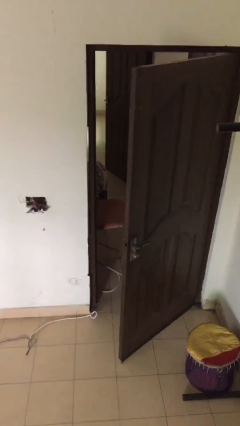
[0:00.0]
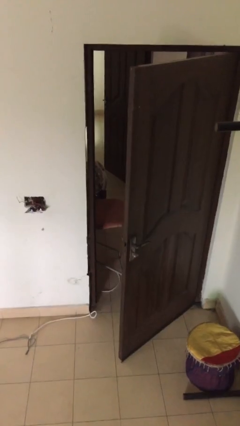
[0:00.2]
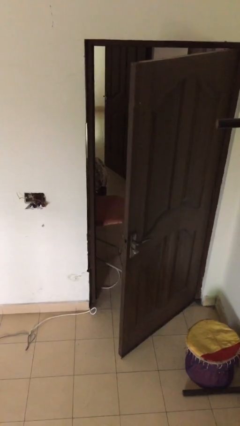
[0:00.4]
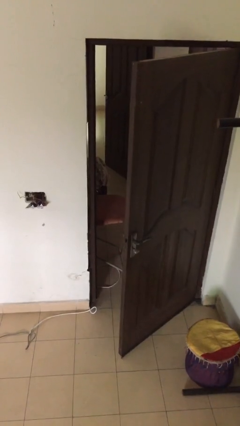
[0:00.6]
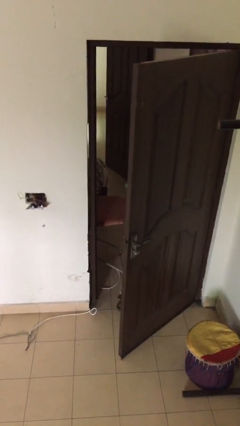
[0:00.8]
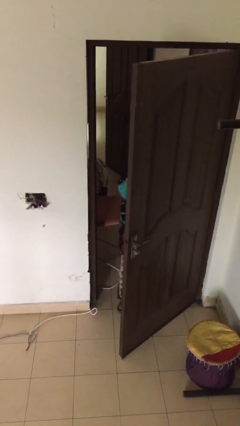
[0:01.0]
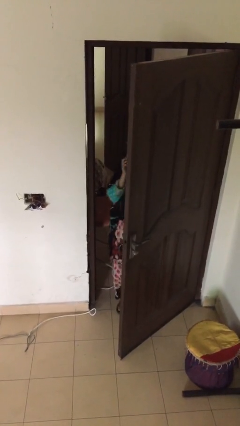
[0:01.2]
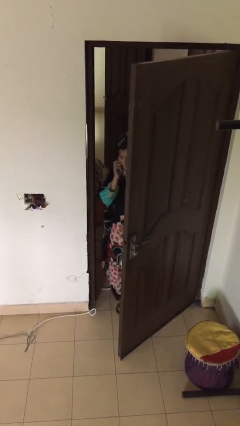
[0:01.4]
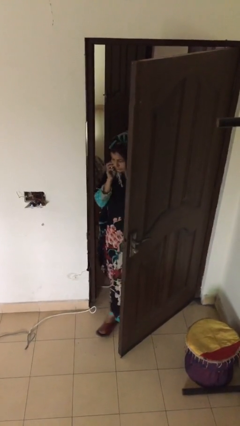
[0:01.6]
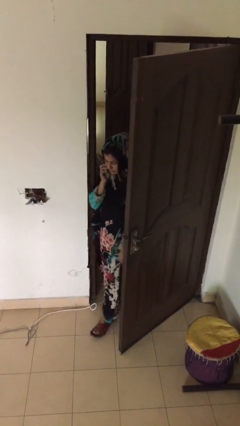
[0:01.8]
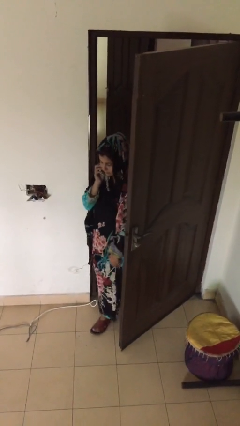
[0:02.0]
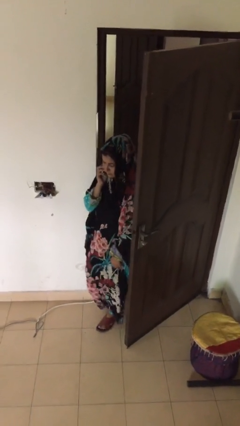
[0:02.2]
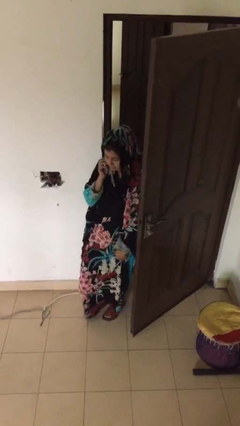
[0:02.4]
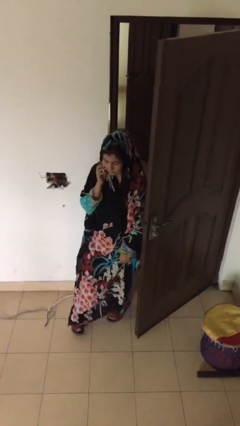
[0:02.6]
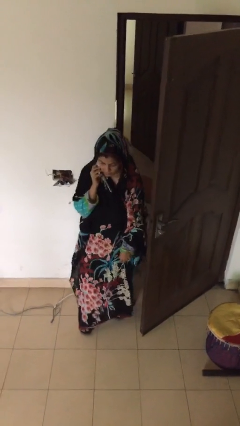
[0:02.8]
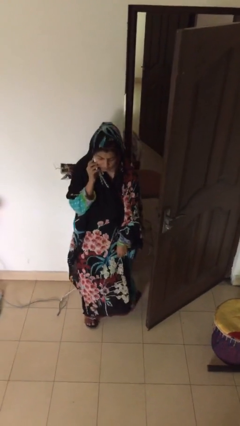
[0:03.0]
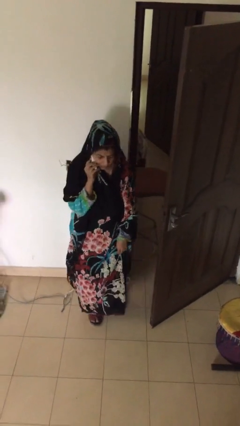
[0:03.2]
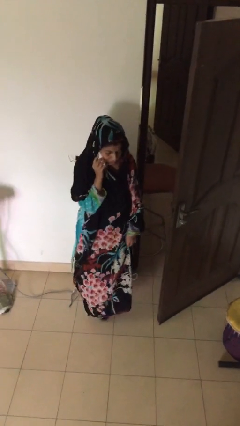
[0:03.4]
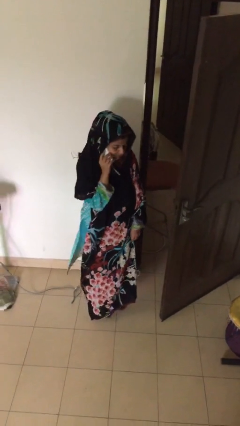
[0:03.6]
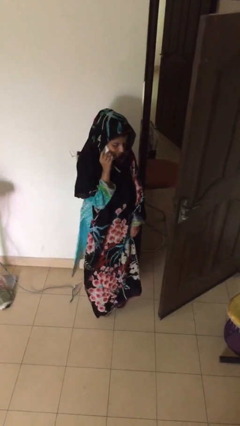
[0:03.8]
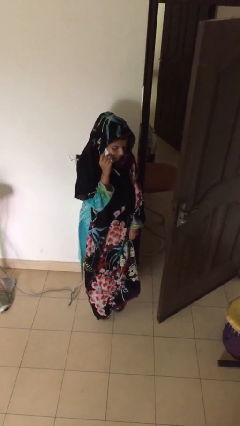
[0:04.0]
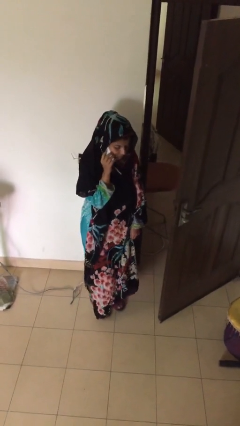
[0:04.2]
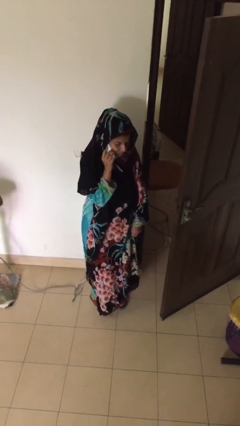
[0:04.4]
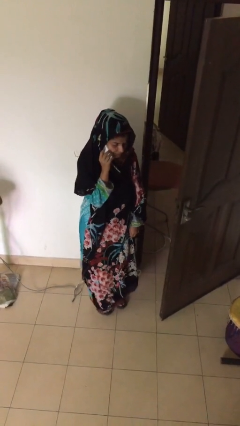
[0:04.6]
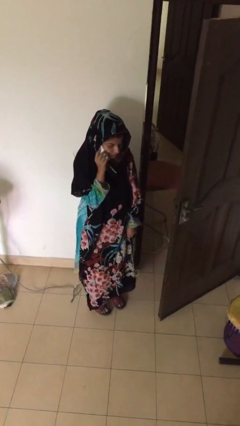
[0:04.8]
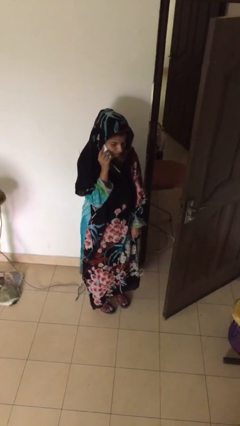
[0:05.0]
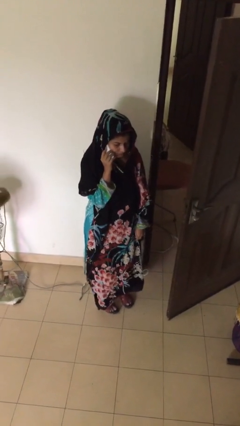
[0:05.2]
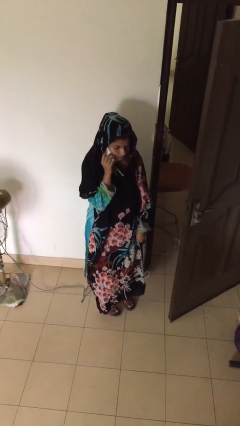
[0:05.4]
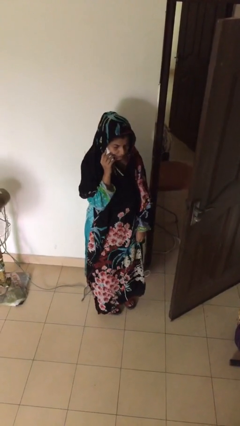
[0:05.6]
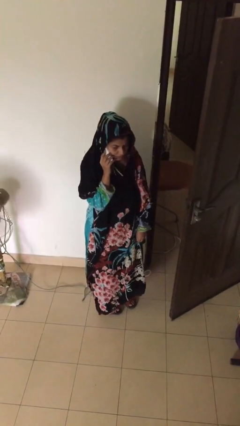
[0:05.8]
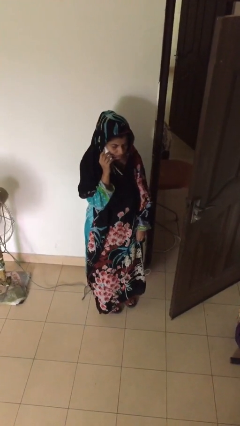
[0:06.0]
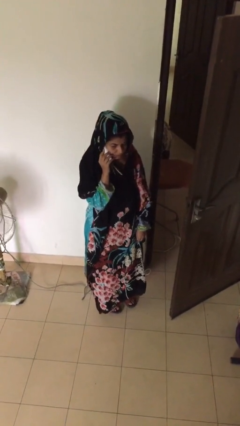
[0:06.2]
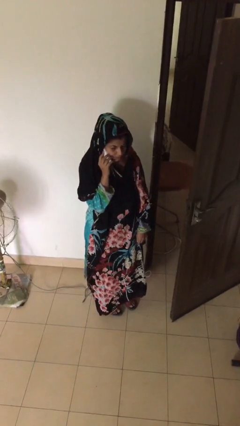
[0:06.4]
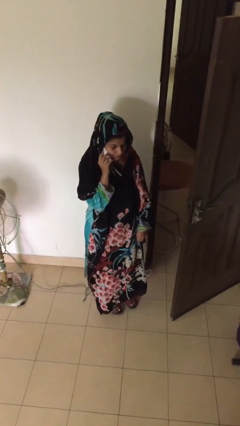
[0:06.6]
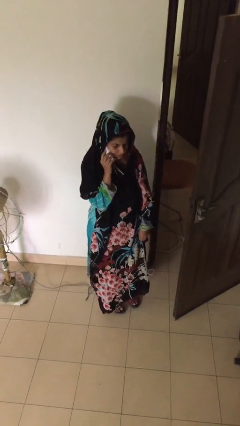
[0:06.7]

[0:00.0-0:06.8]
person enters scene through structure

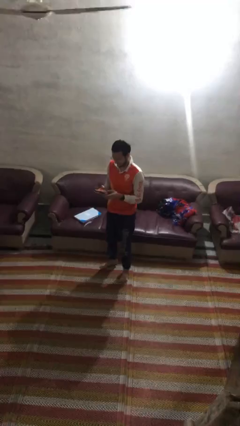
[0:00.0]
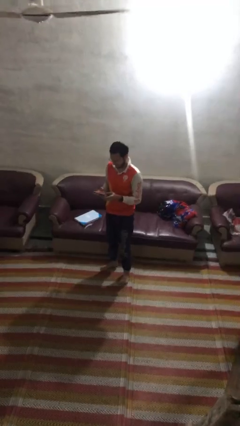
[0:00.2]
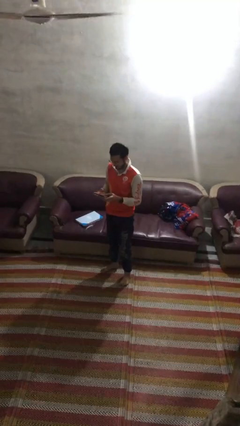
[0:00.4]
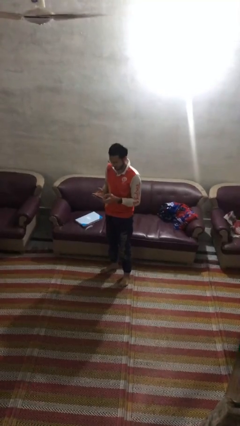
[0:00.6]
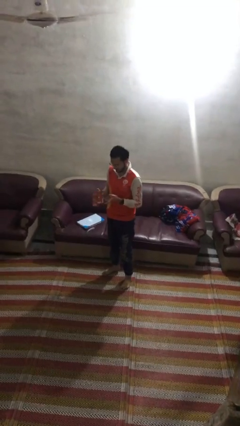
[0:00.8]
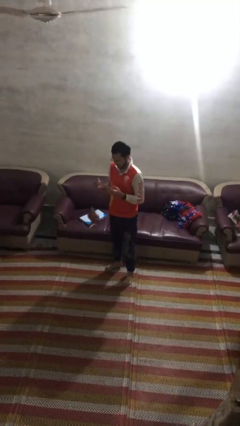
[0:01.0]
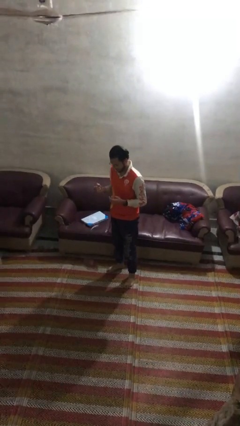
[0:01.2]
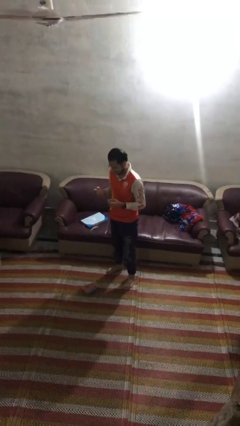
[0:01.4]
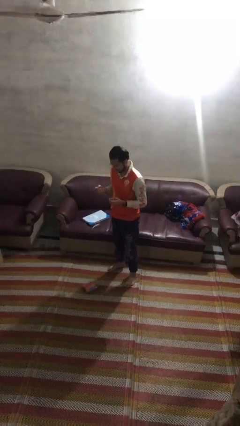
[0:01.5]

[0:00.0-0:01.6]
person drops object

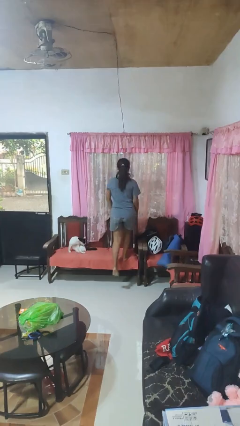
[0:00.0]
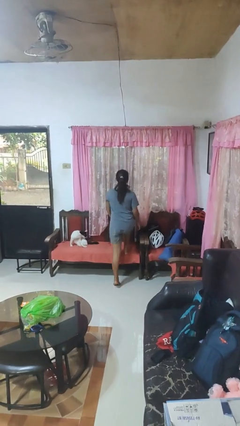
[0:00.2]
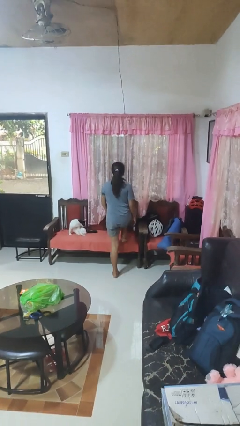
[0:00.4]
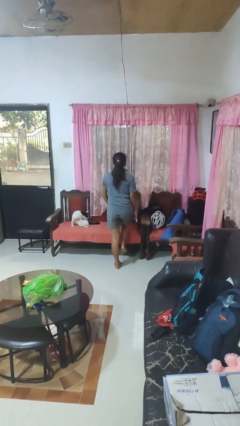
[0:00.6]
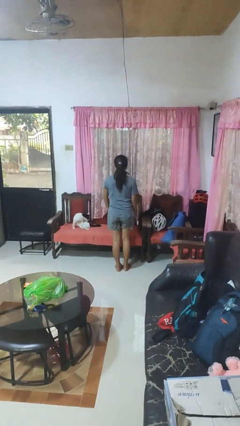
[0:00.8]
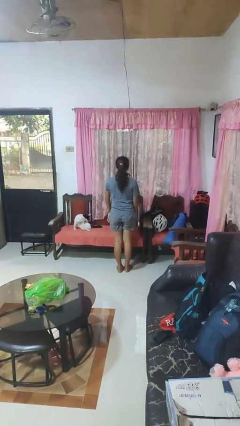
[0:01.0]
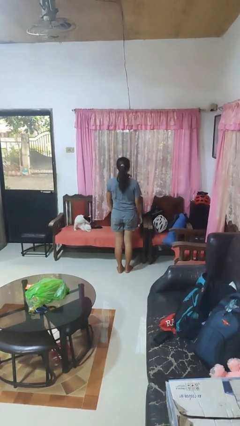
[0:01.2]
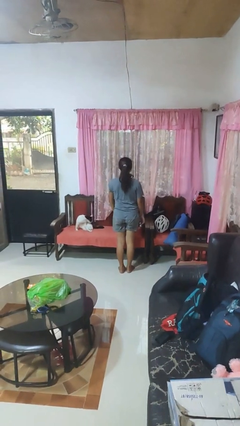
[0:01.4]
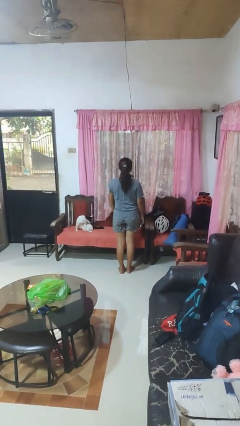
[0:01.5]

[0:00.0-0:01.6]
person climbs off chair

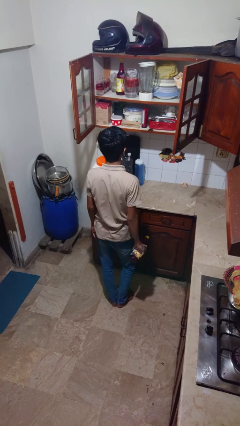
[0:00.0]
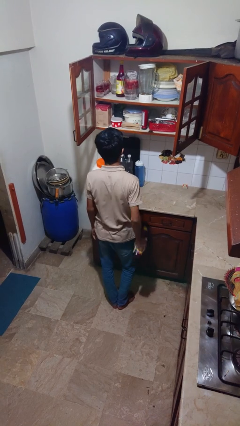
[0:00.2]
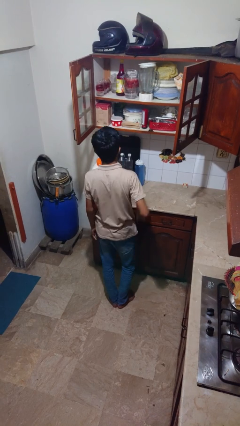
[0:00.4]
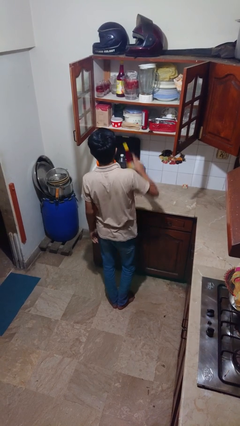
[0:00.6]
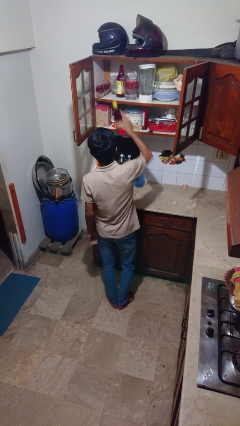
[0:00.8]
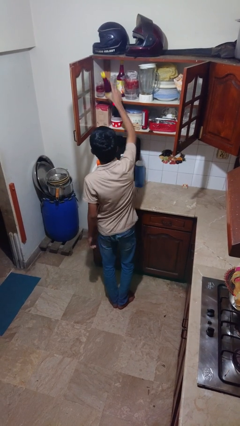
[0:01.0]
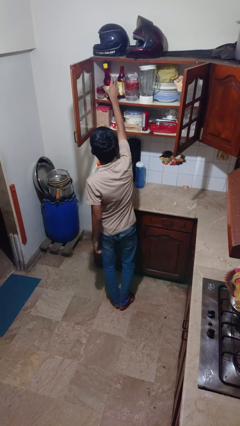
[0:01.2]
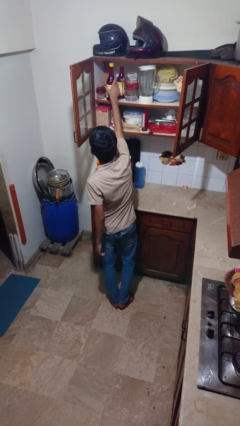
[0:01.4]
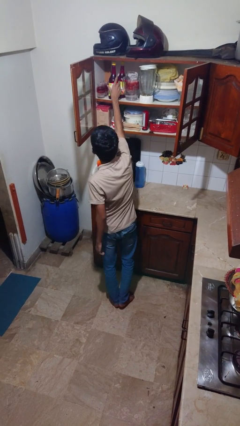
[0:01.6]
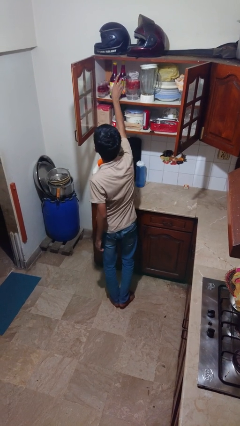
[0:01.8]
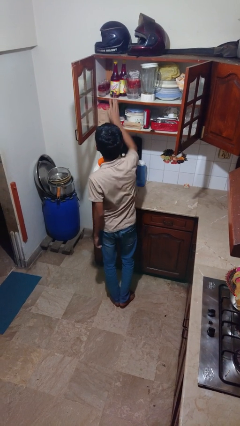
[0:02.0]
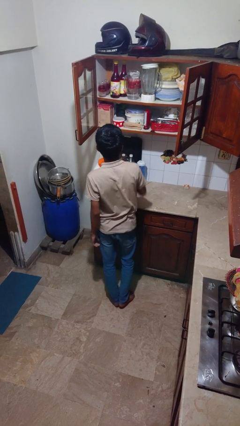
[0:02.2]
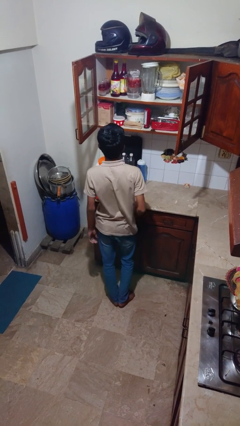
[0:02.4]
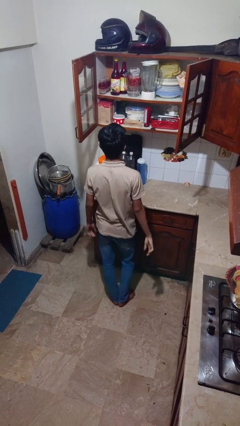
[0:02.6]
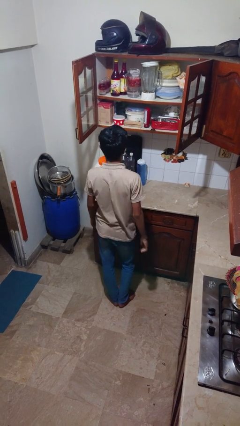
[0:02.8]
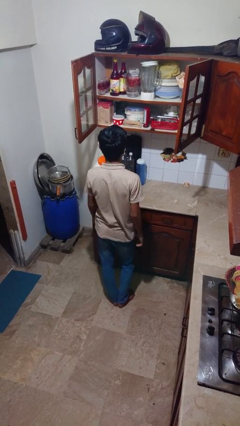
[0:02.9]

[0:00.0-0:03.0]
person puts down object into cabinet

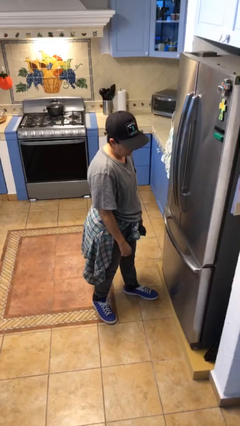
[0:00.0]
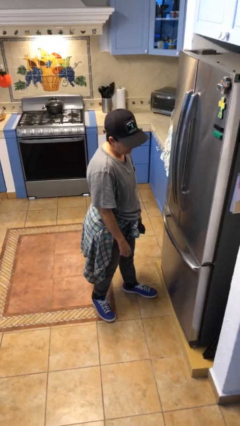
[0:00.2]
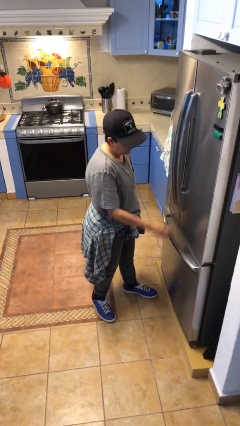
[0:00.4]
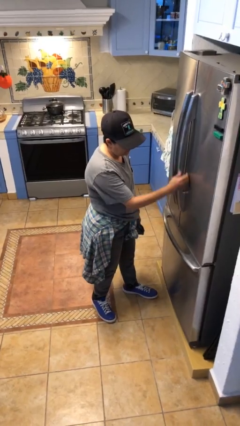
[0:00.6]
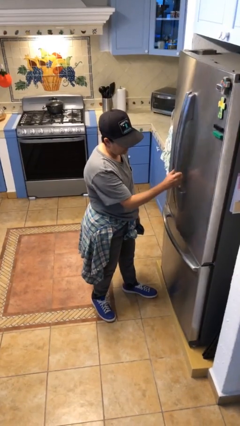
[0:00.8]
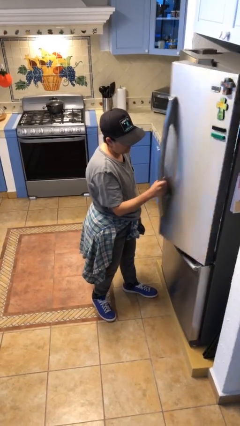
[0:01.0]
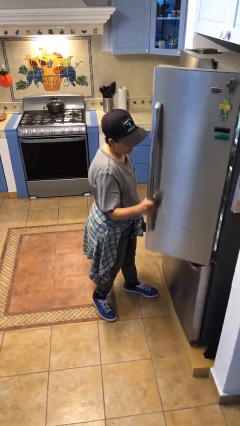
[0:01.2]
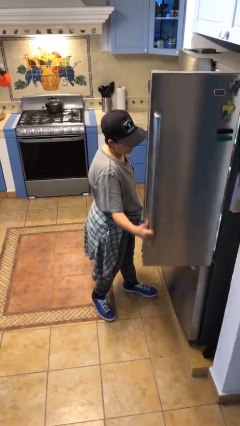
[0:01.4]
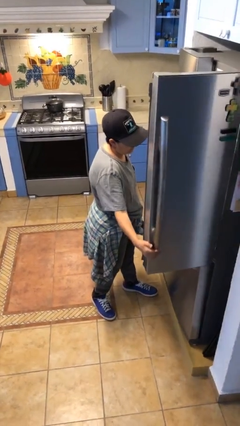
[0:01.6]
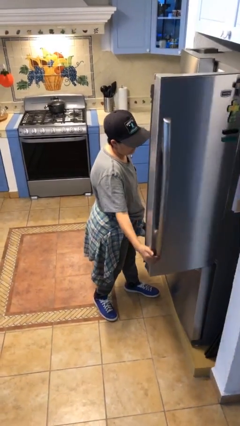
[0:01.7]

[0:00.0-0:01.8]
person opens refrigerator

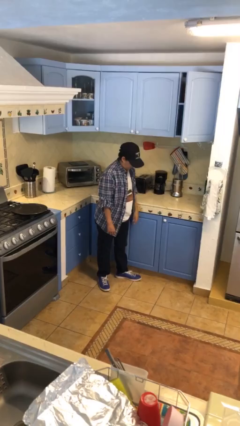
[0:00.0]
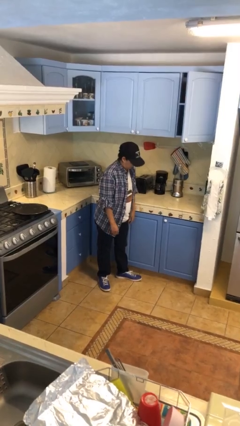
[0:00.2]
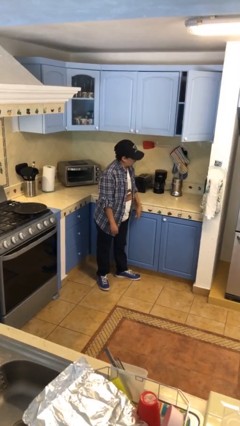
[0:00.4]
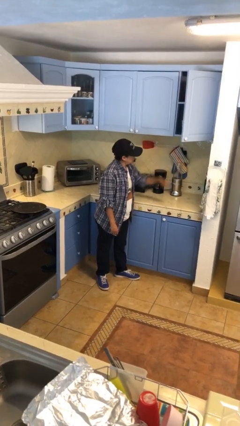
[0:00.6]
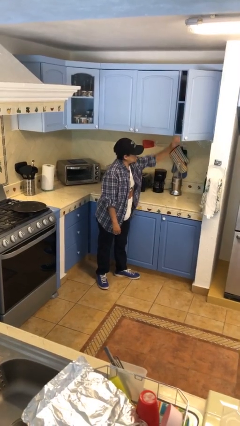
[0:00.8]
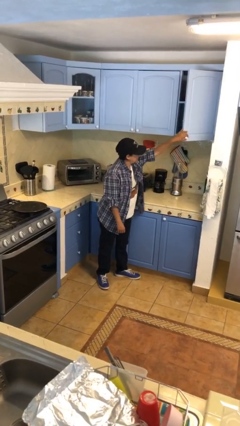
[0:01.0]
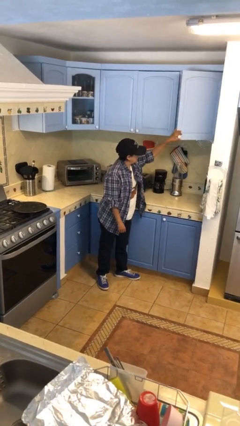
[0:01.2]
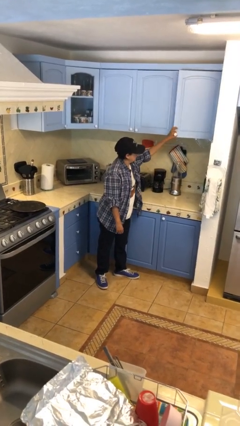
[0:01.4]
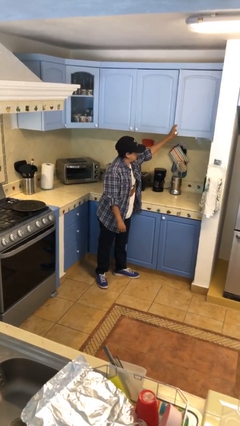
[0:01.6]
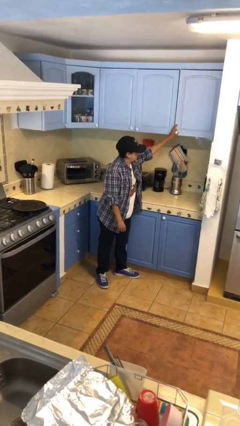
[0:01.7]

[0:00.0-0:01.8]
person closes cabinet

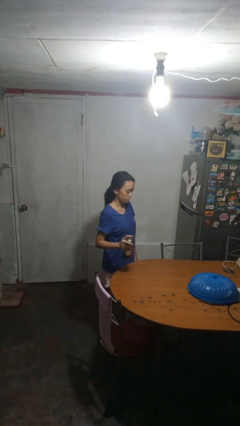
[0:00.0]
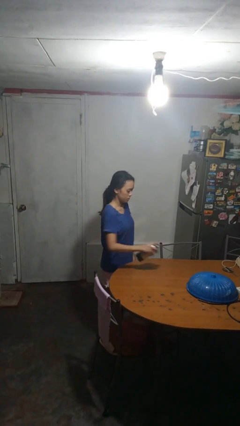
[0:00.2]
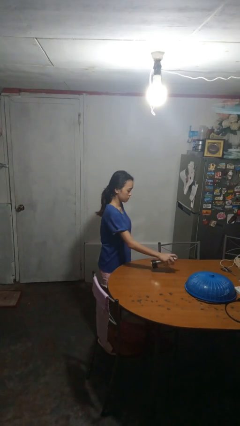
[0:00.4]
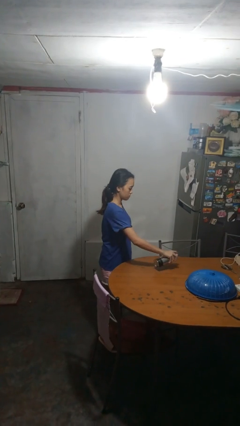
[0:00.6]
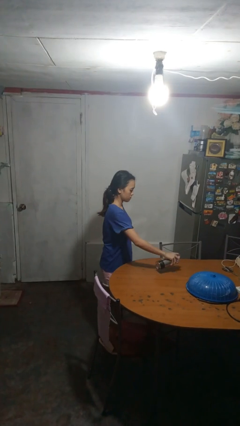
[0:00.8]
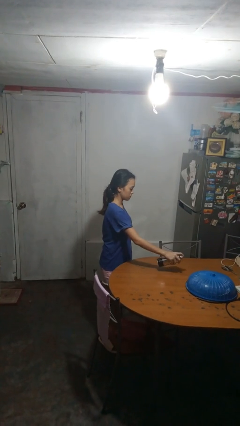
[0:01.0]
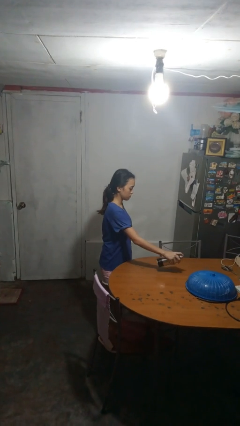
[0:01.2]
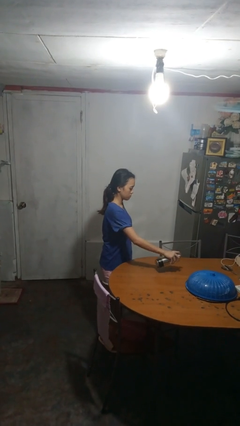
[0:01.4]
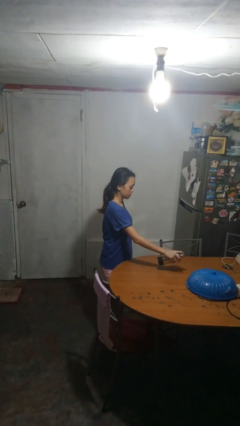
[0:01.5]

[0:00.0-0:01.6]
person sprays from bottle
